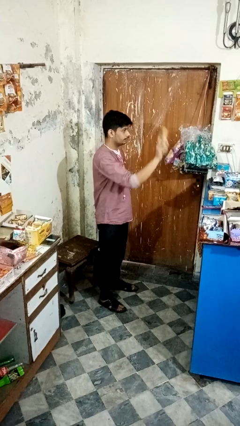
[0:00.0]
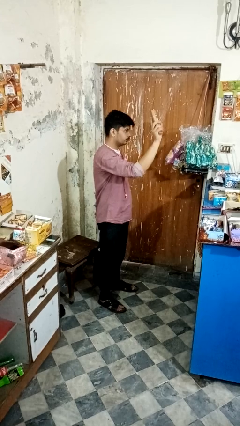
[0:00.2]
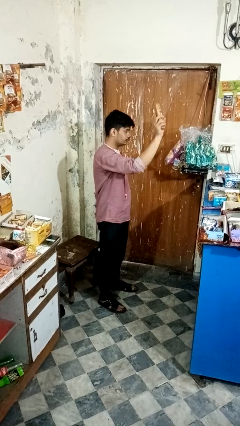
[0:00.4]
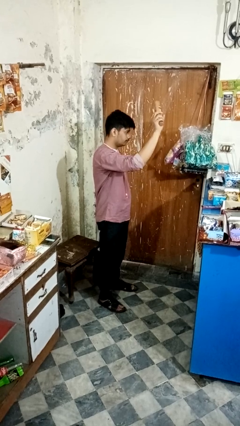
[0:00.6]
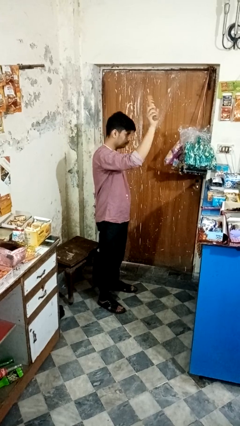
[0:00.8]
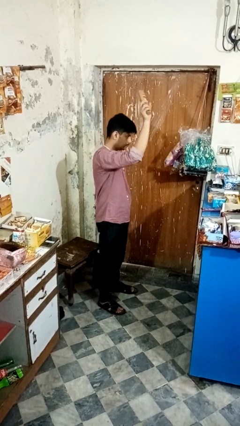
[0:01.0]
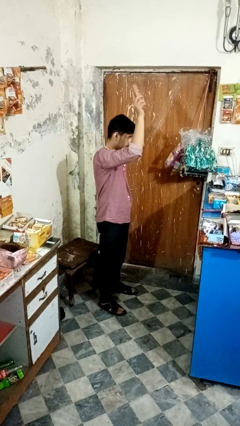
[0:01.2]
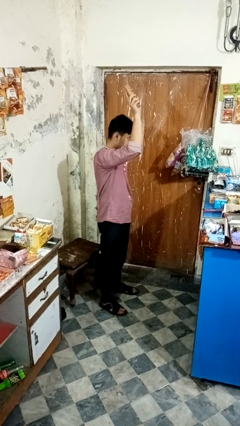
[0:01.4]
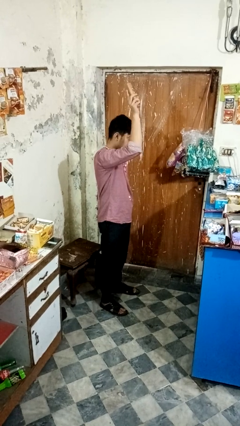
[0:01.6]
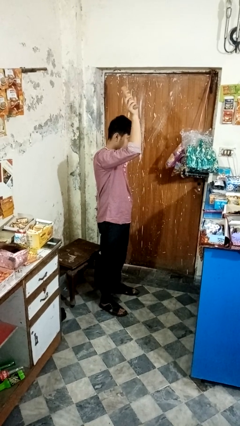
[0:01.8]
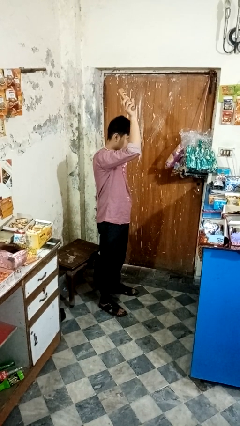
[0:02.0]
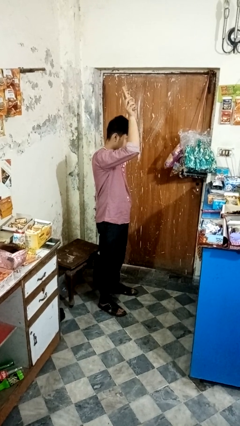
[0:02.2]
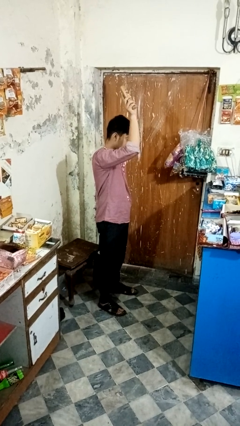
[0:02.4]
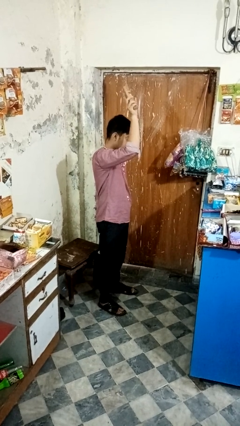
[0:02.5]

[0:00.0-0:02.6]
person holds object above head

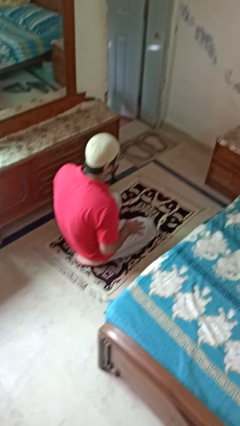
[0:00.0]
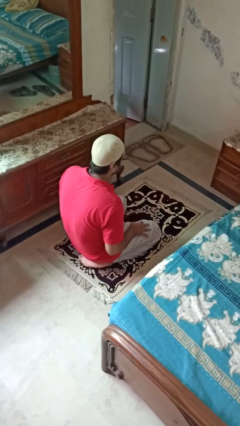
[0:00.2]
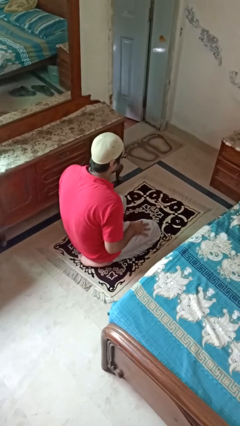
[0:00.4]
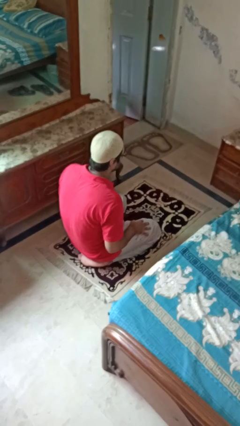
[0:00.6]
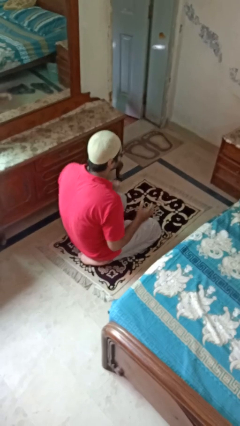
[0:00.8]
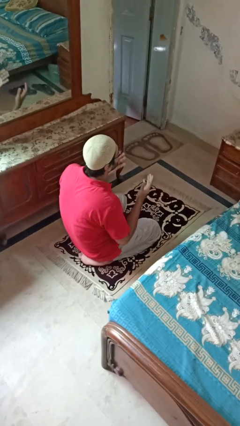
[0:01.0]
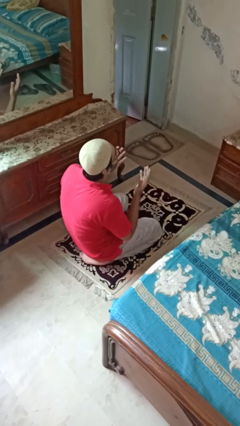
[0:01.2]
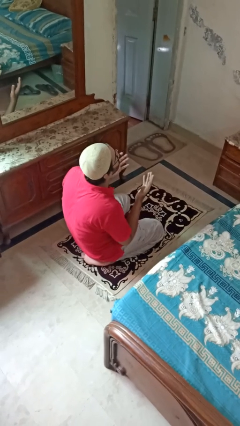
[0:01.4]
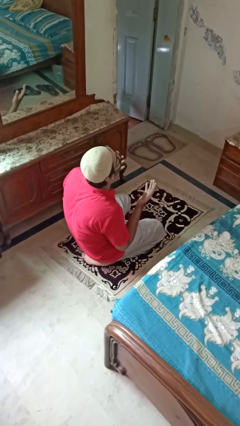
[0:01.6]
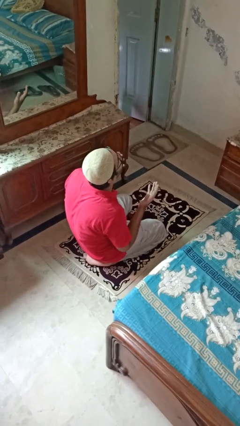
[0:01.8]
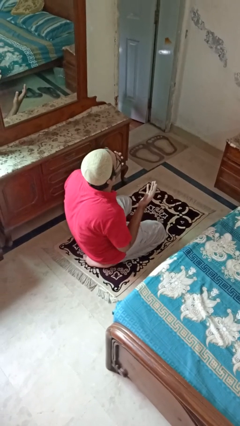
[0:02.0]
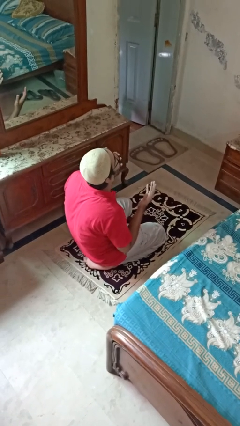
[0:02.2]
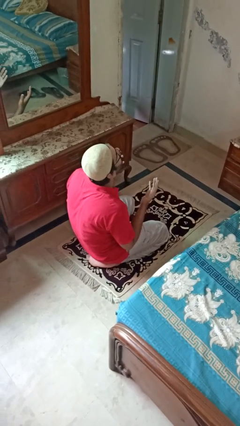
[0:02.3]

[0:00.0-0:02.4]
person prays

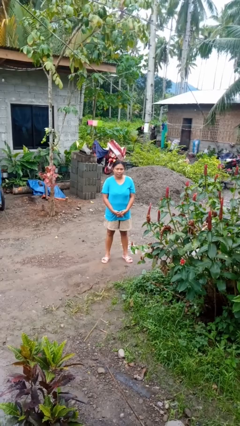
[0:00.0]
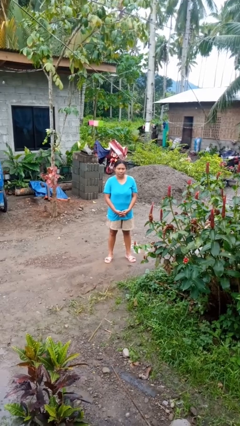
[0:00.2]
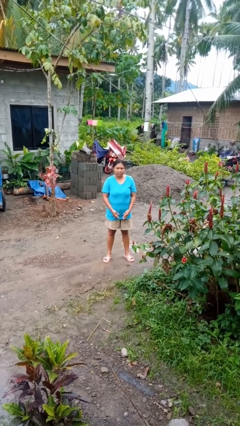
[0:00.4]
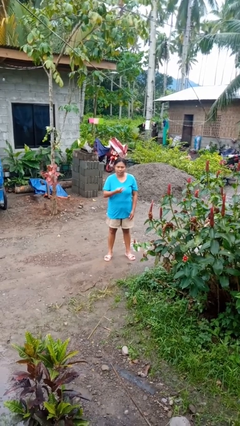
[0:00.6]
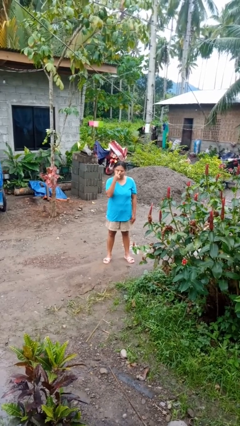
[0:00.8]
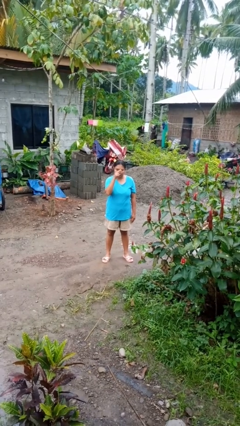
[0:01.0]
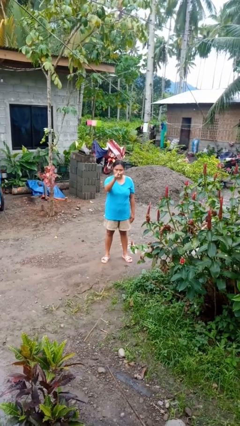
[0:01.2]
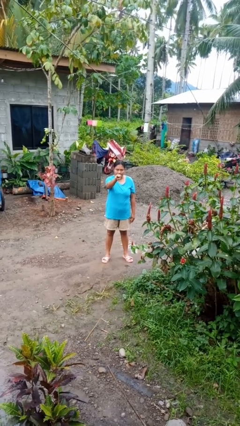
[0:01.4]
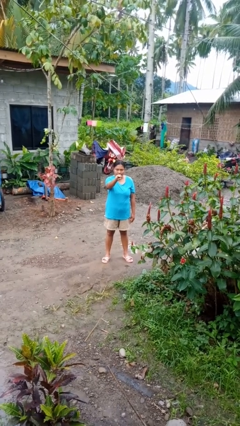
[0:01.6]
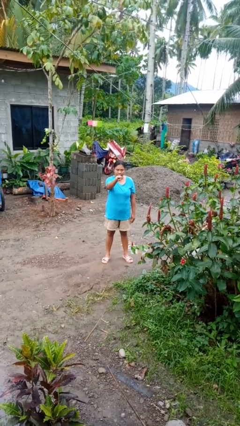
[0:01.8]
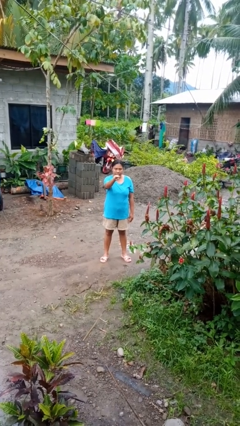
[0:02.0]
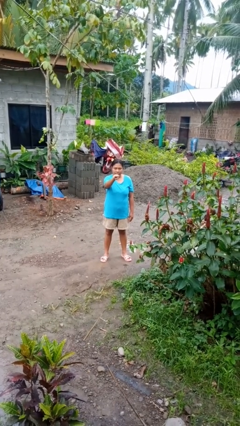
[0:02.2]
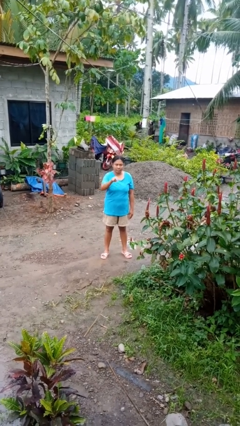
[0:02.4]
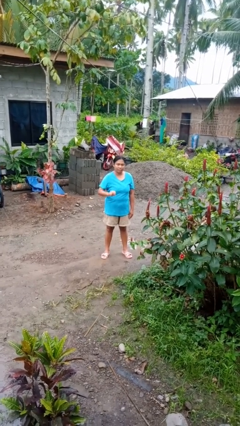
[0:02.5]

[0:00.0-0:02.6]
person gestures watch closely

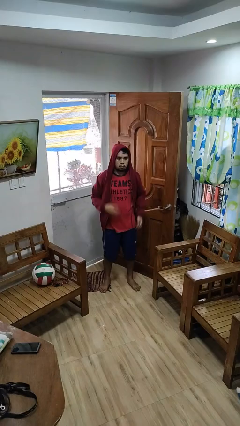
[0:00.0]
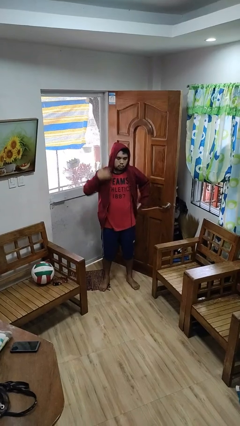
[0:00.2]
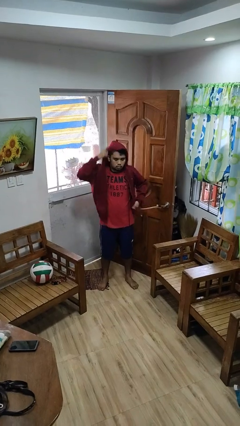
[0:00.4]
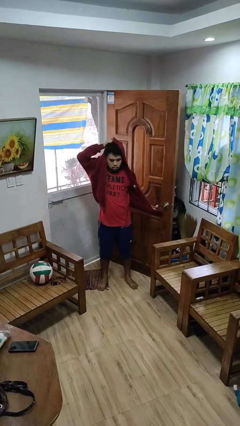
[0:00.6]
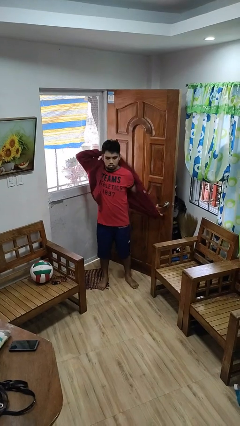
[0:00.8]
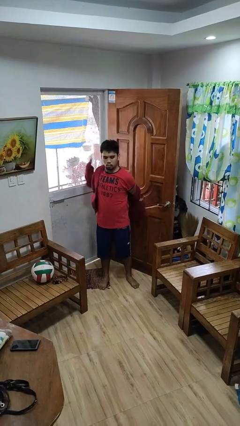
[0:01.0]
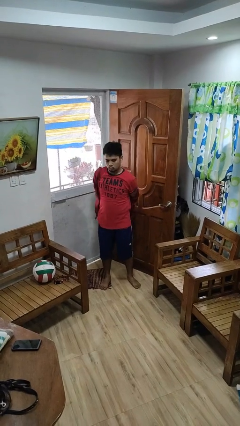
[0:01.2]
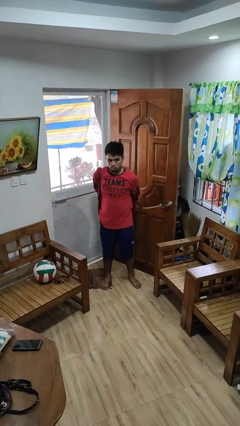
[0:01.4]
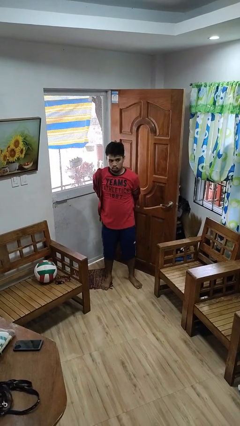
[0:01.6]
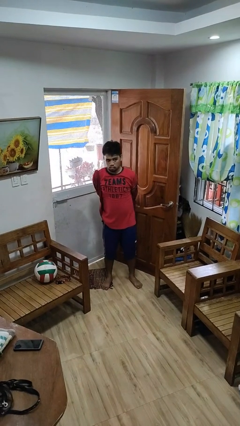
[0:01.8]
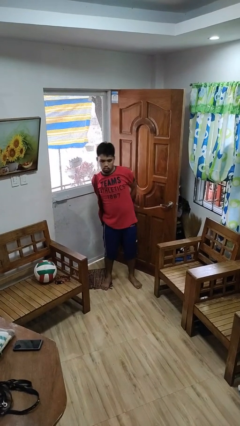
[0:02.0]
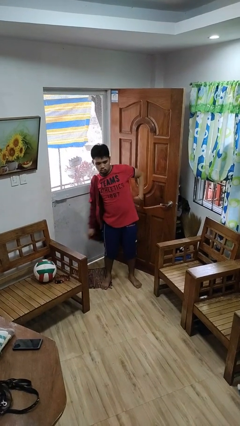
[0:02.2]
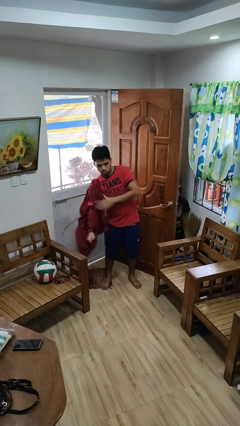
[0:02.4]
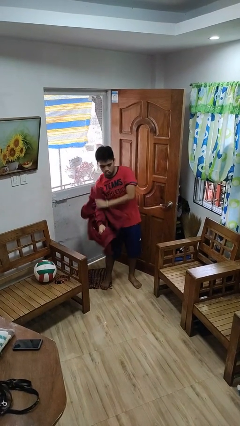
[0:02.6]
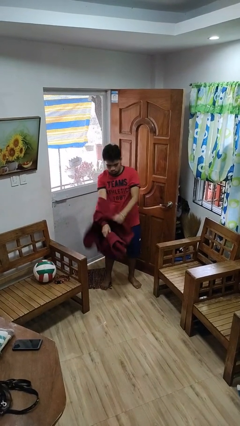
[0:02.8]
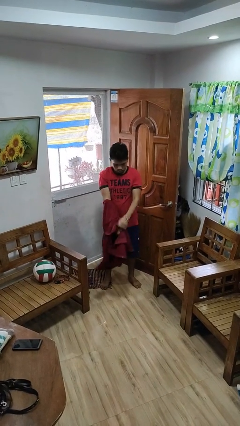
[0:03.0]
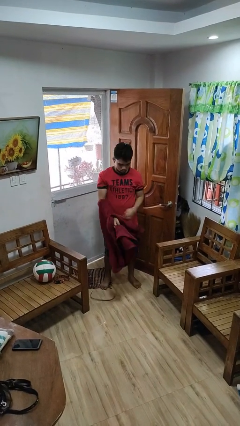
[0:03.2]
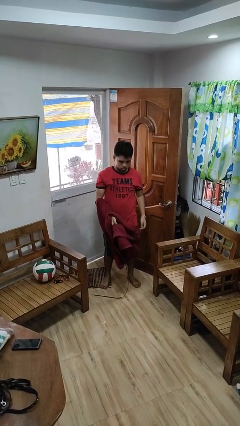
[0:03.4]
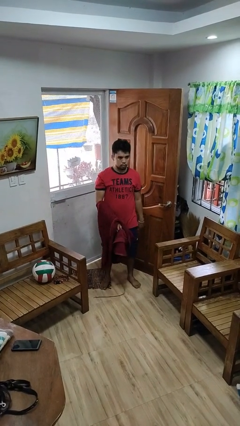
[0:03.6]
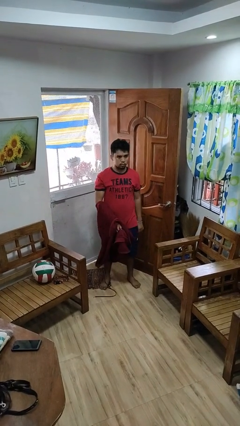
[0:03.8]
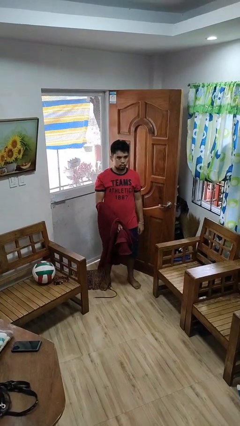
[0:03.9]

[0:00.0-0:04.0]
person takes off hoodie

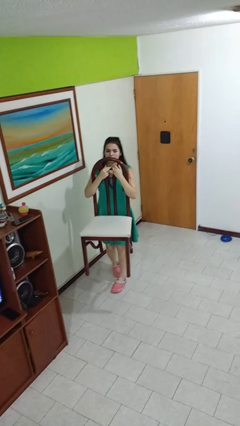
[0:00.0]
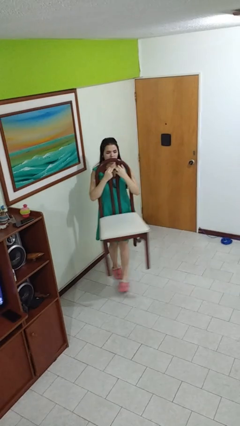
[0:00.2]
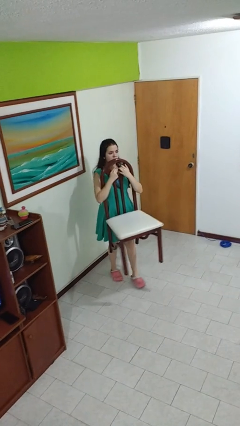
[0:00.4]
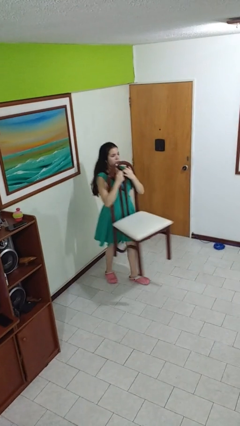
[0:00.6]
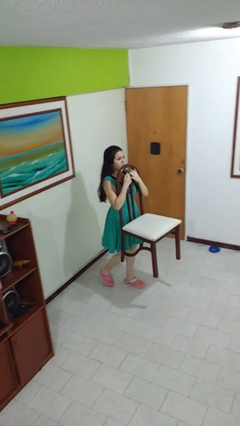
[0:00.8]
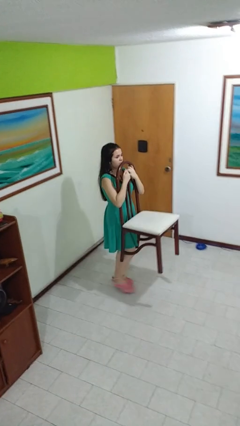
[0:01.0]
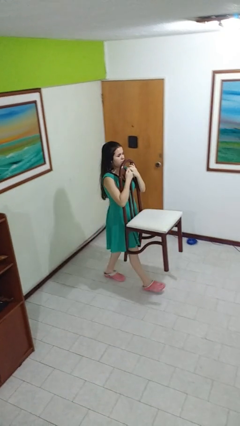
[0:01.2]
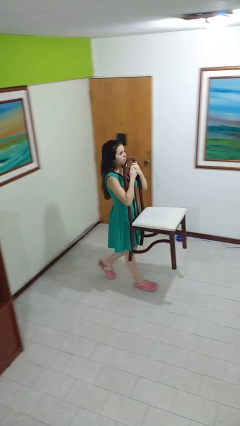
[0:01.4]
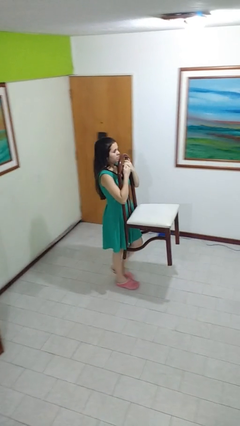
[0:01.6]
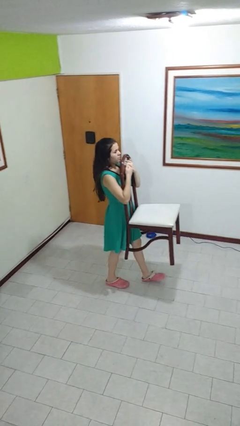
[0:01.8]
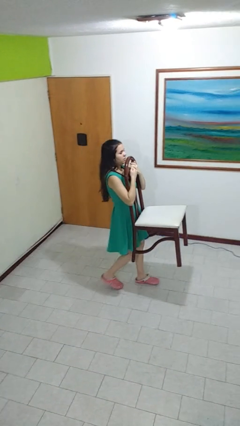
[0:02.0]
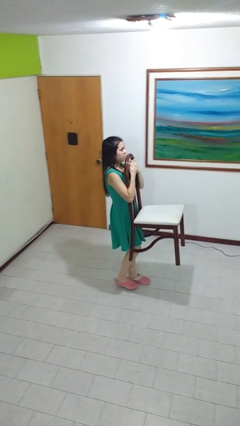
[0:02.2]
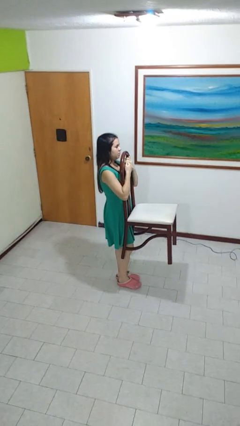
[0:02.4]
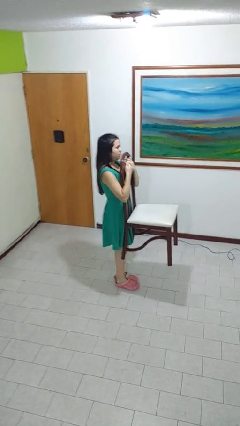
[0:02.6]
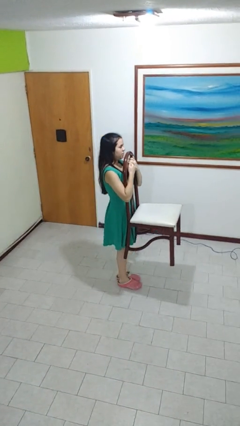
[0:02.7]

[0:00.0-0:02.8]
person carries furniture

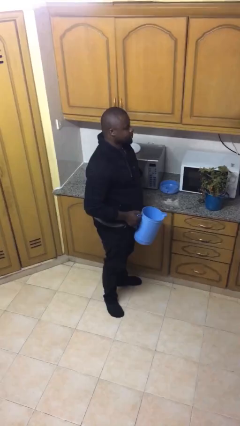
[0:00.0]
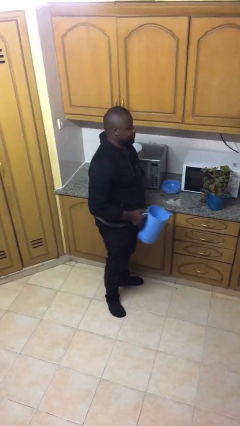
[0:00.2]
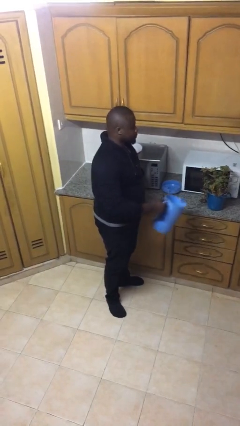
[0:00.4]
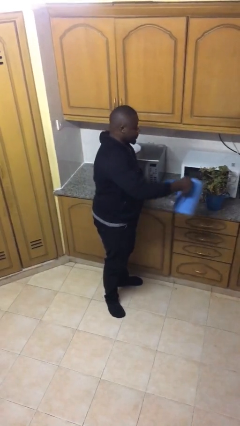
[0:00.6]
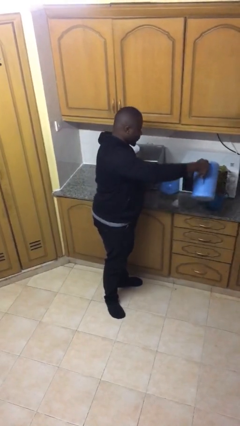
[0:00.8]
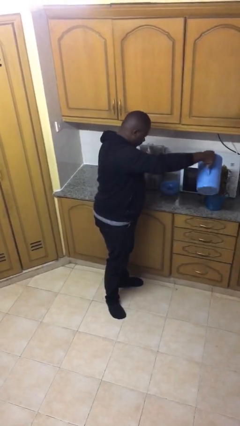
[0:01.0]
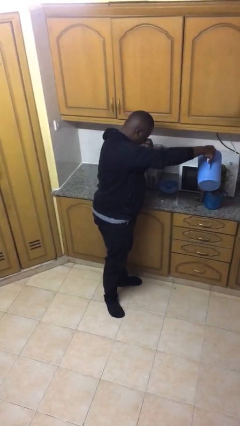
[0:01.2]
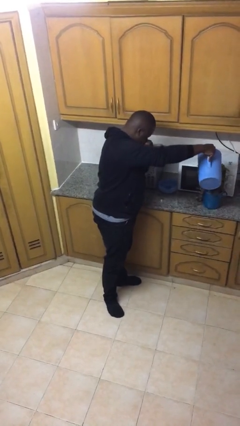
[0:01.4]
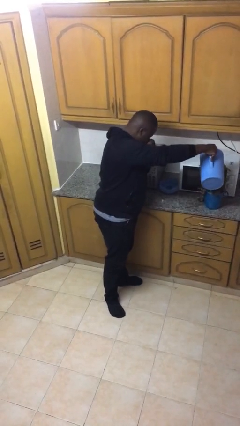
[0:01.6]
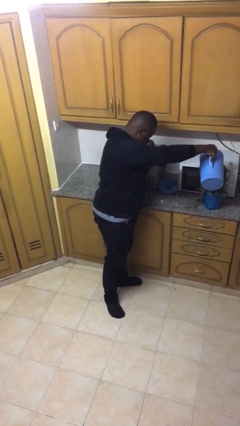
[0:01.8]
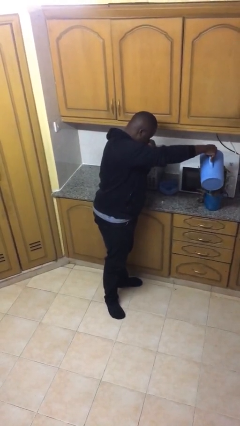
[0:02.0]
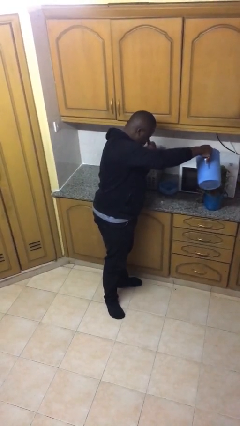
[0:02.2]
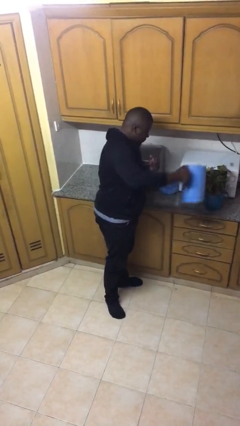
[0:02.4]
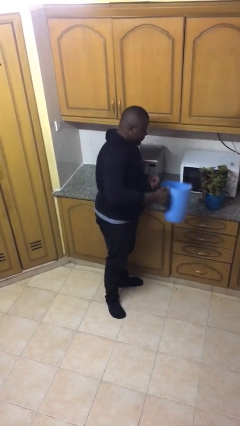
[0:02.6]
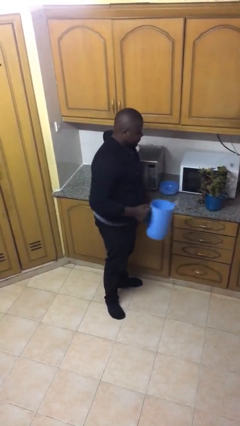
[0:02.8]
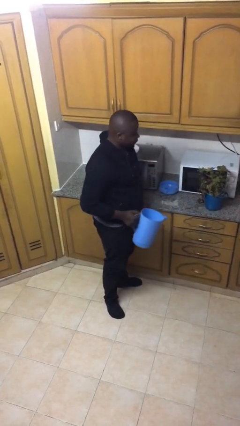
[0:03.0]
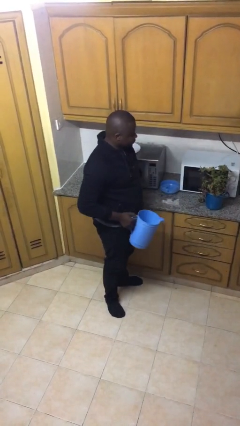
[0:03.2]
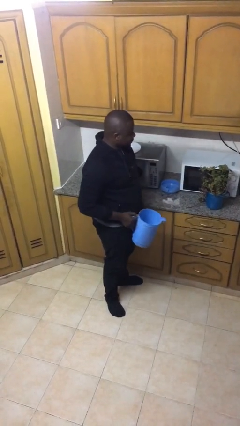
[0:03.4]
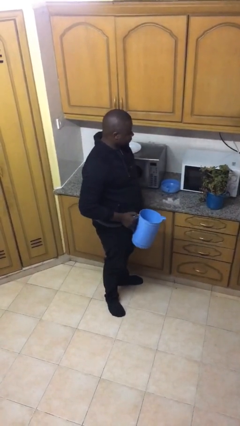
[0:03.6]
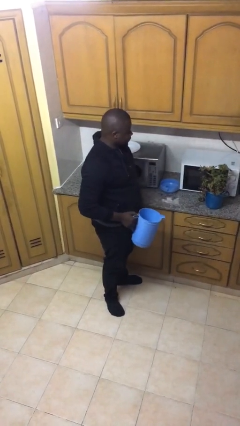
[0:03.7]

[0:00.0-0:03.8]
person waters houseplant
